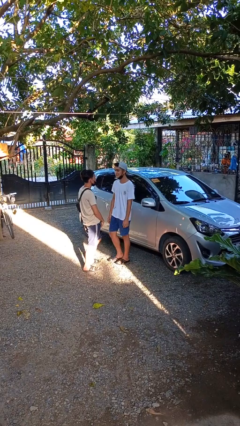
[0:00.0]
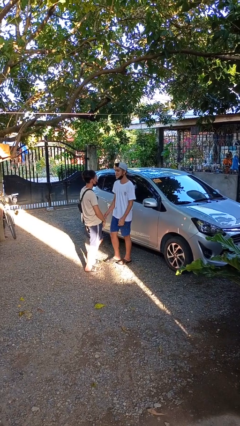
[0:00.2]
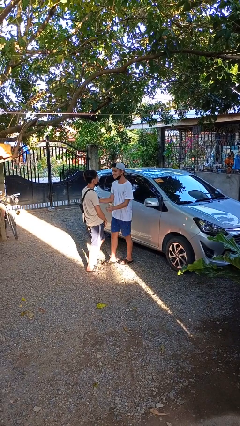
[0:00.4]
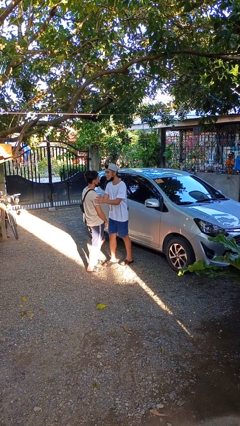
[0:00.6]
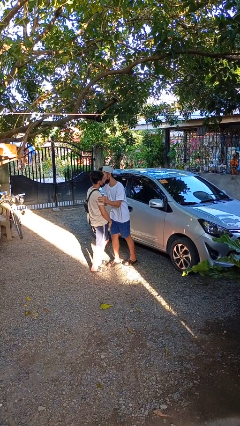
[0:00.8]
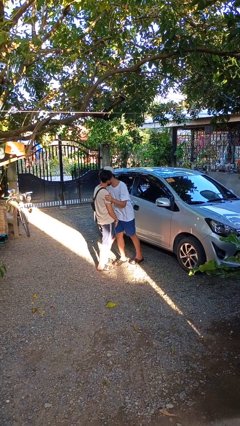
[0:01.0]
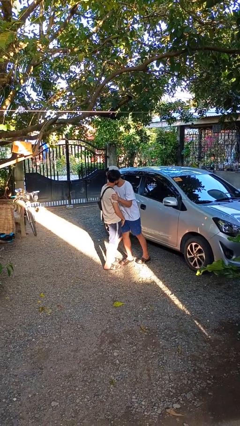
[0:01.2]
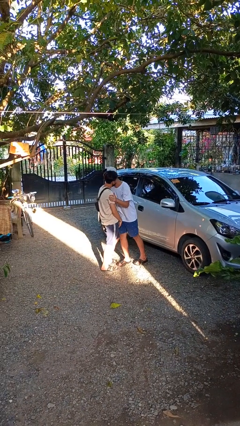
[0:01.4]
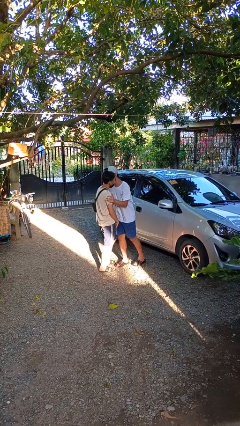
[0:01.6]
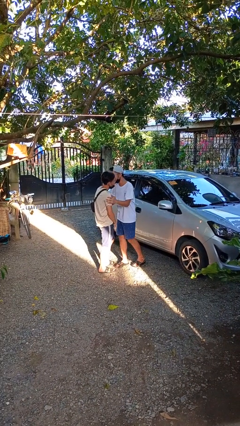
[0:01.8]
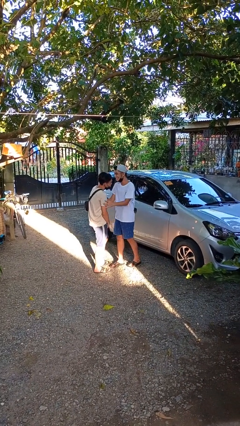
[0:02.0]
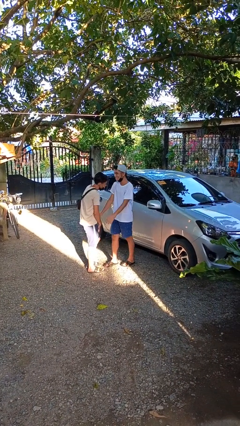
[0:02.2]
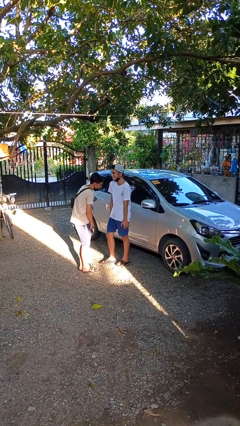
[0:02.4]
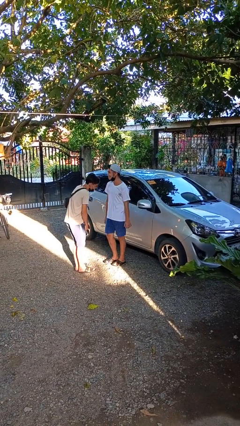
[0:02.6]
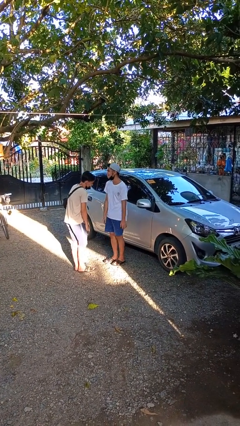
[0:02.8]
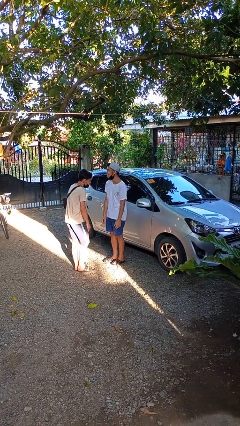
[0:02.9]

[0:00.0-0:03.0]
person kisses cheek of person

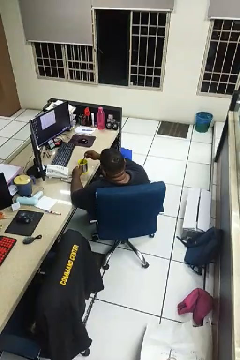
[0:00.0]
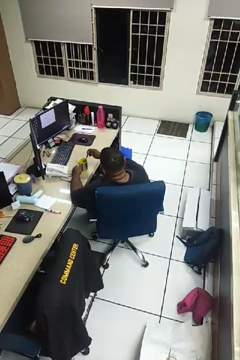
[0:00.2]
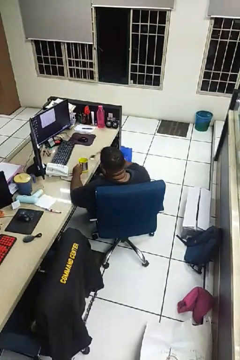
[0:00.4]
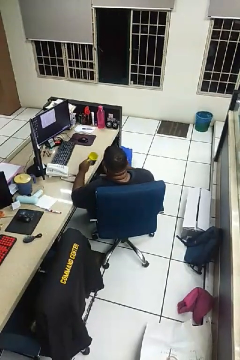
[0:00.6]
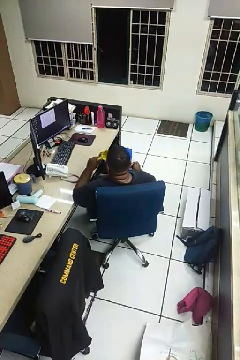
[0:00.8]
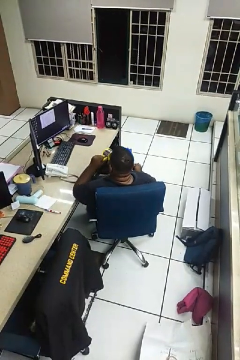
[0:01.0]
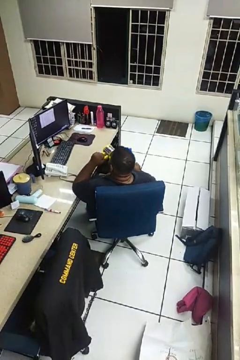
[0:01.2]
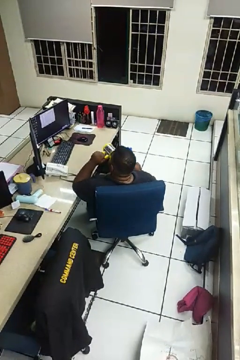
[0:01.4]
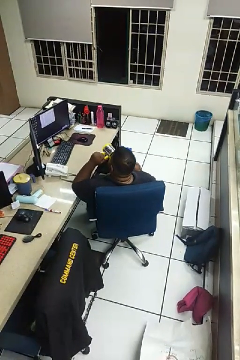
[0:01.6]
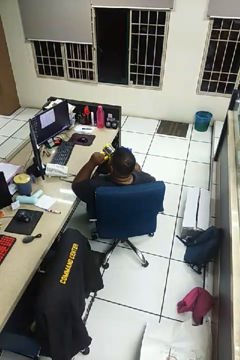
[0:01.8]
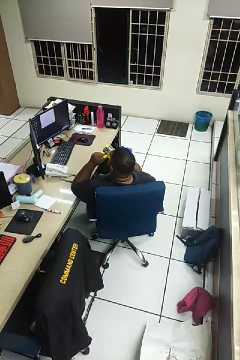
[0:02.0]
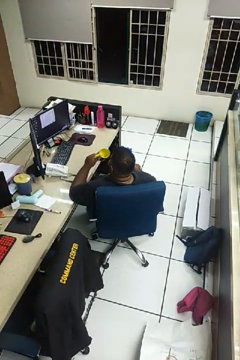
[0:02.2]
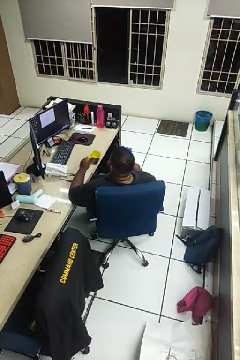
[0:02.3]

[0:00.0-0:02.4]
person drinks from mug

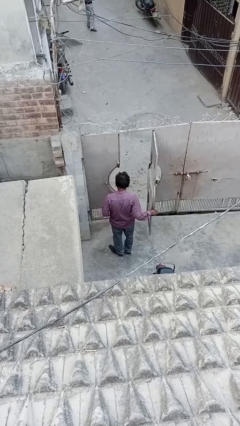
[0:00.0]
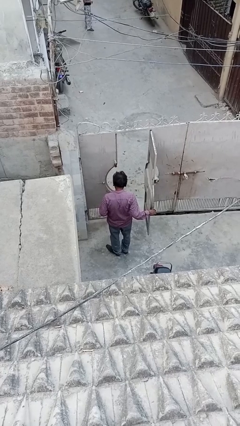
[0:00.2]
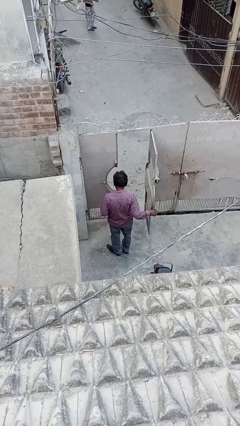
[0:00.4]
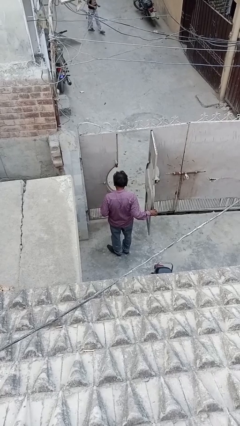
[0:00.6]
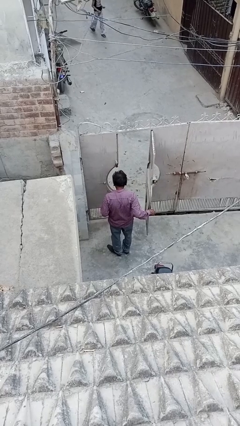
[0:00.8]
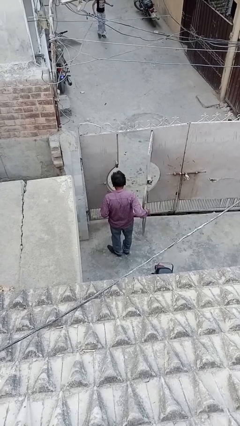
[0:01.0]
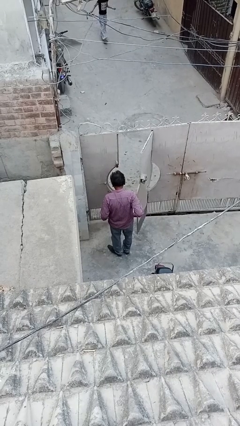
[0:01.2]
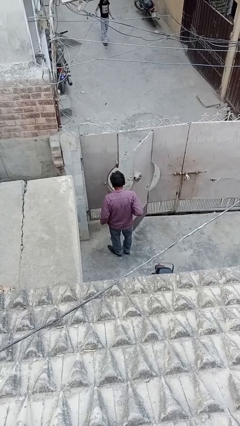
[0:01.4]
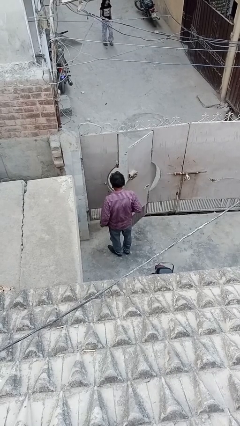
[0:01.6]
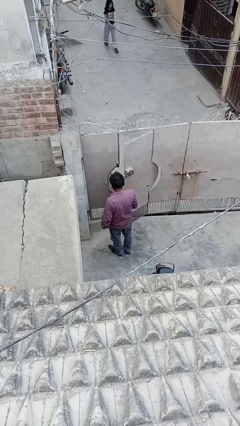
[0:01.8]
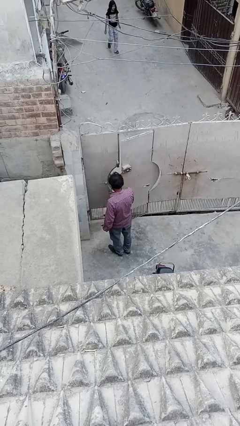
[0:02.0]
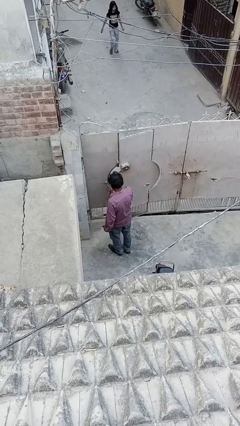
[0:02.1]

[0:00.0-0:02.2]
person closes facility door

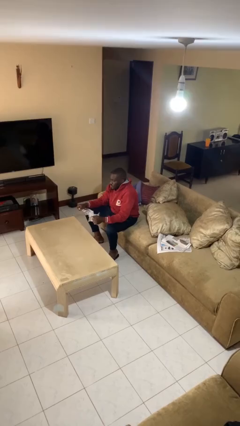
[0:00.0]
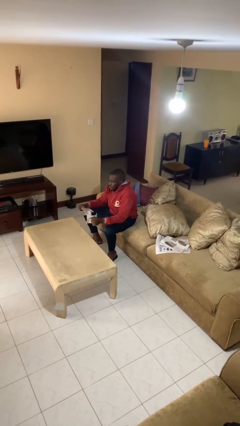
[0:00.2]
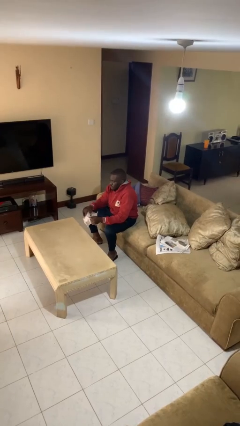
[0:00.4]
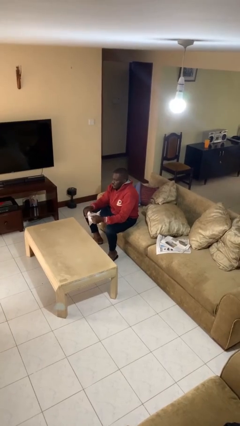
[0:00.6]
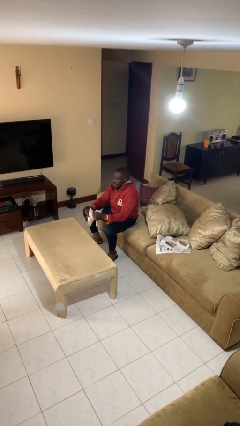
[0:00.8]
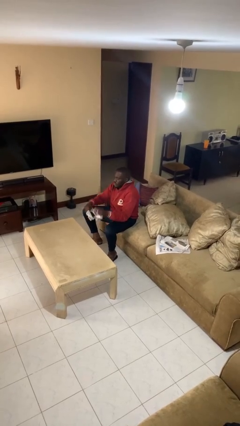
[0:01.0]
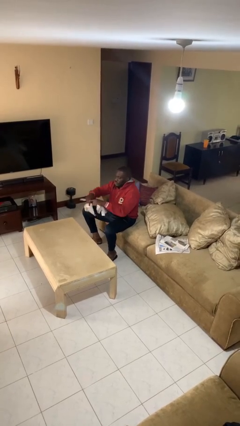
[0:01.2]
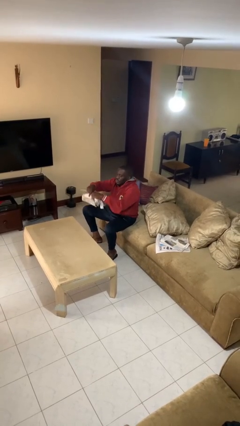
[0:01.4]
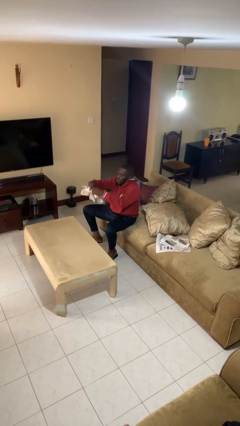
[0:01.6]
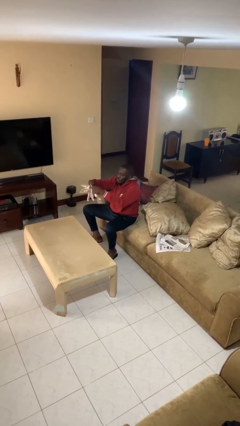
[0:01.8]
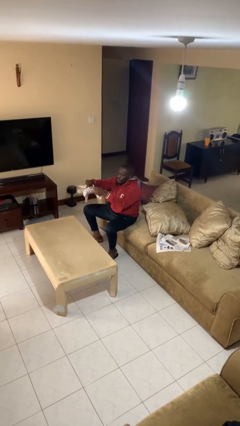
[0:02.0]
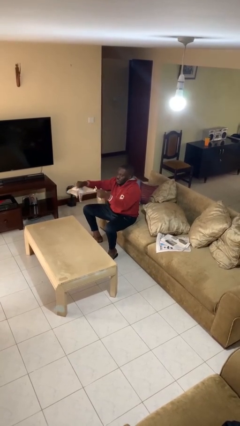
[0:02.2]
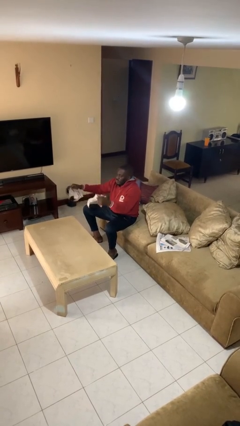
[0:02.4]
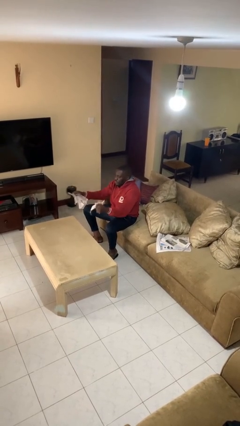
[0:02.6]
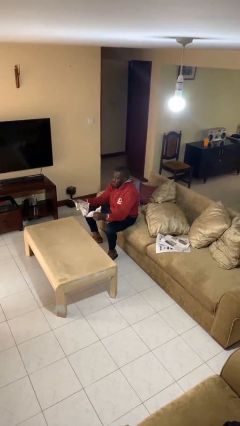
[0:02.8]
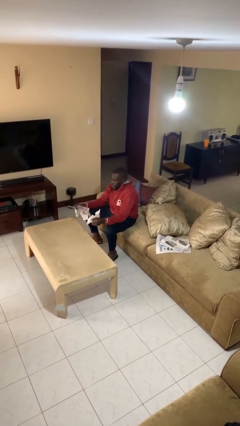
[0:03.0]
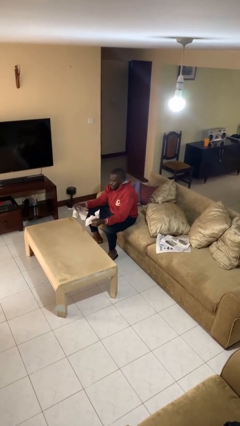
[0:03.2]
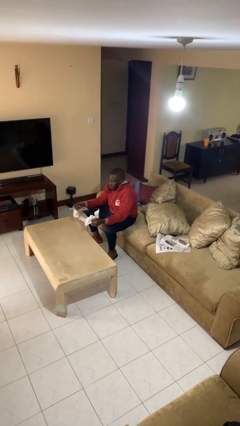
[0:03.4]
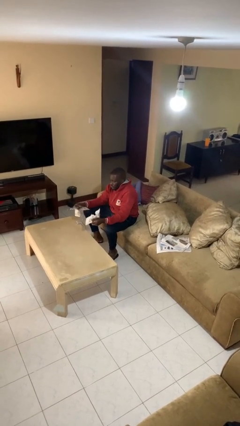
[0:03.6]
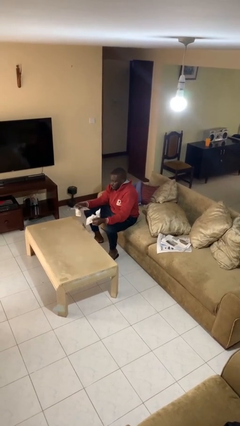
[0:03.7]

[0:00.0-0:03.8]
person tears paper

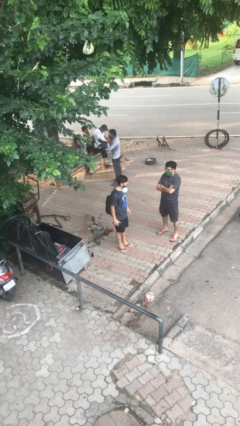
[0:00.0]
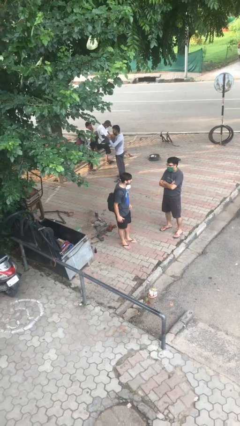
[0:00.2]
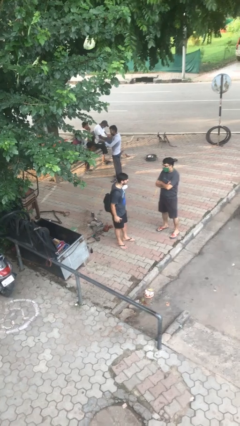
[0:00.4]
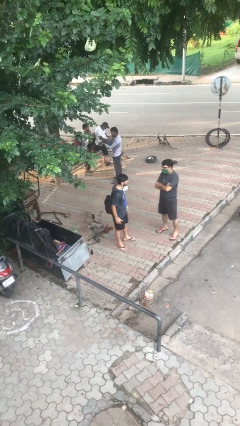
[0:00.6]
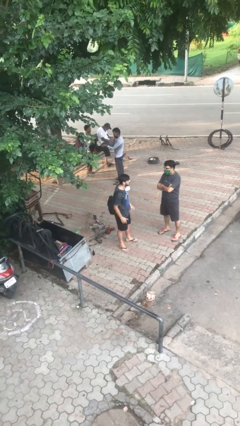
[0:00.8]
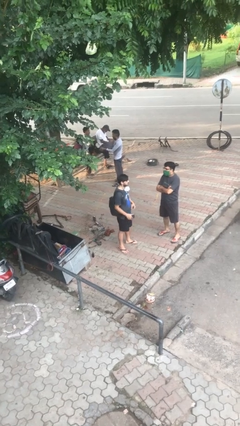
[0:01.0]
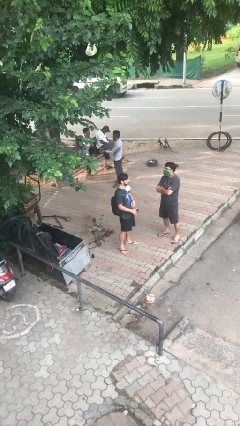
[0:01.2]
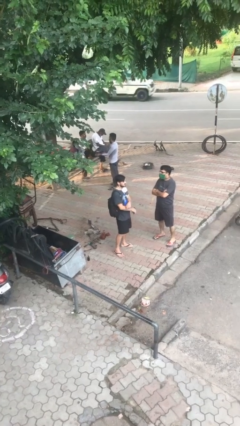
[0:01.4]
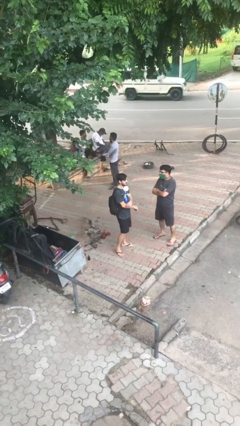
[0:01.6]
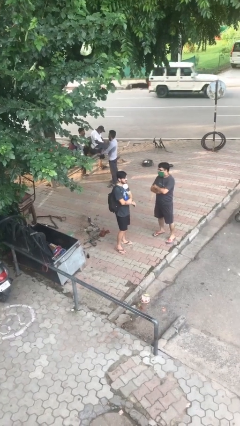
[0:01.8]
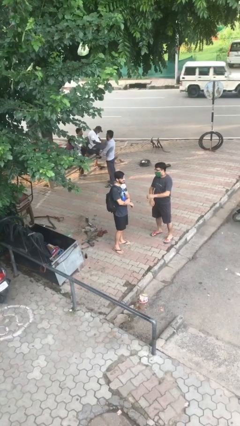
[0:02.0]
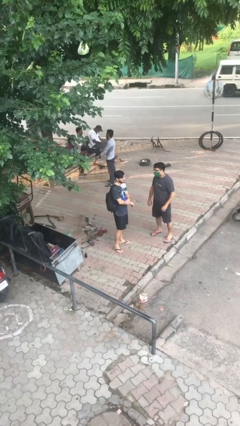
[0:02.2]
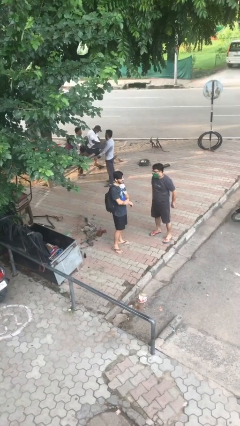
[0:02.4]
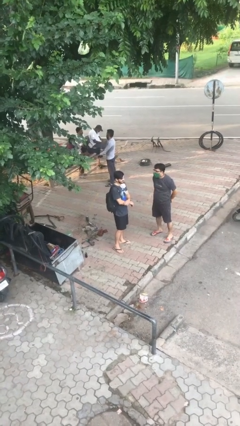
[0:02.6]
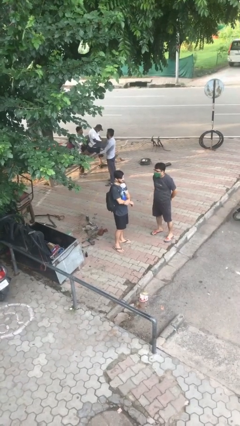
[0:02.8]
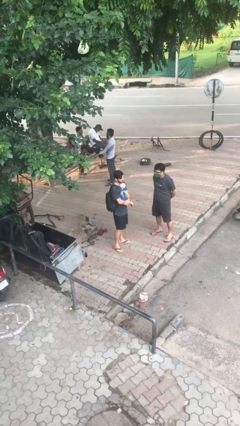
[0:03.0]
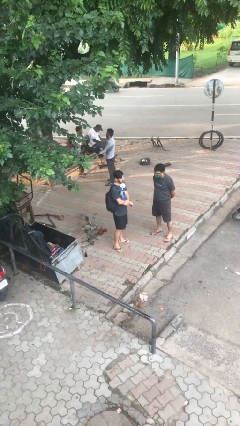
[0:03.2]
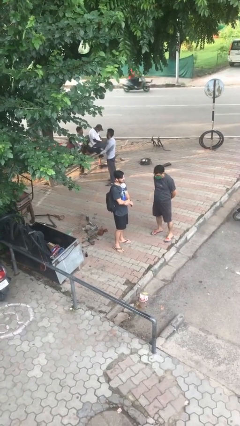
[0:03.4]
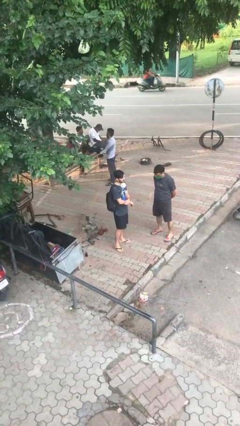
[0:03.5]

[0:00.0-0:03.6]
person talks to person

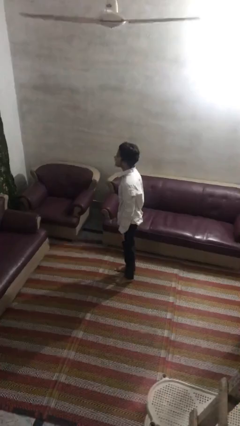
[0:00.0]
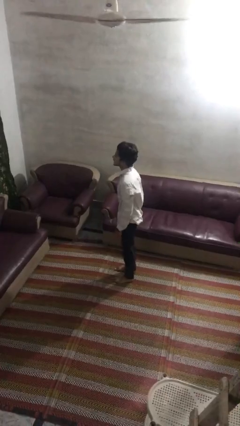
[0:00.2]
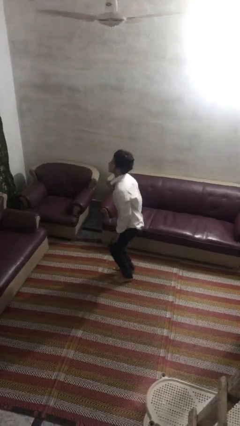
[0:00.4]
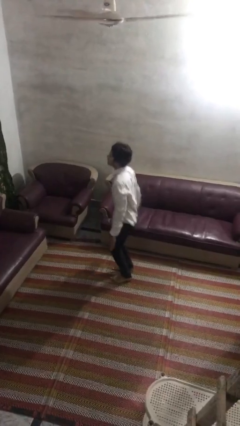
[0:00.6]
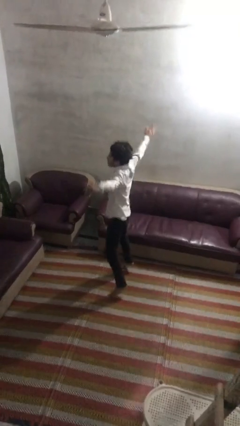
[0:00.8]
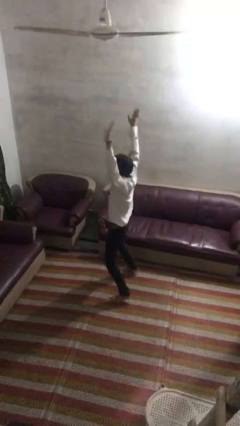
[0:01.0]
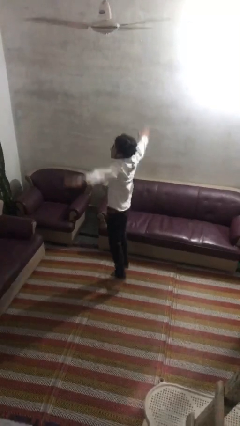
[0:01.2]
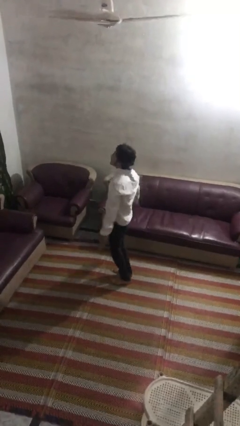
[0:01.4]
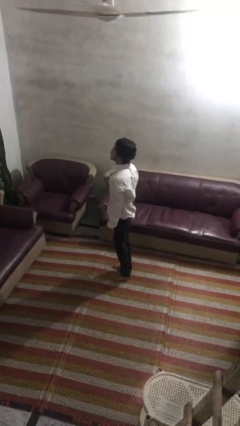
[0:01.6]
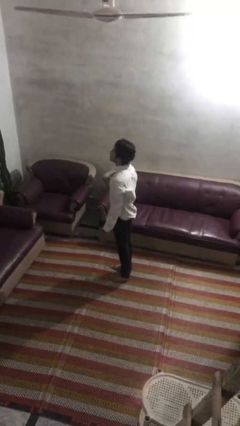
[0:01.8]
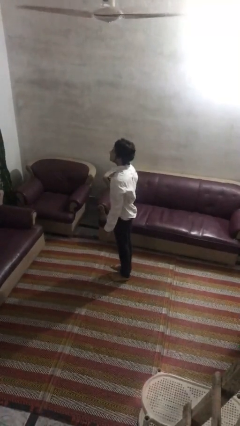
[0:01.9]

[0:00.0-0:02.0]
person exercises with jumping jacks

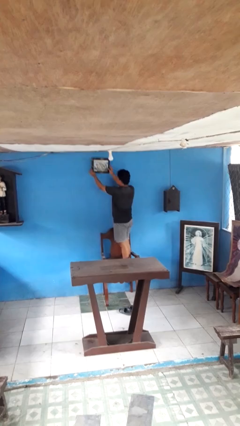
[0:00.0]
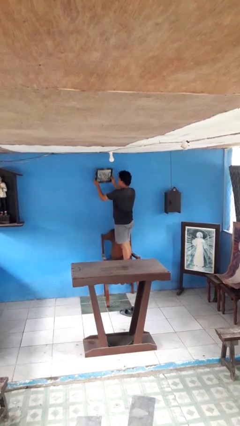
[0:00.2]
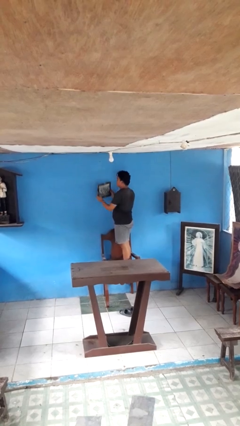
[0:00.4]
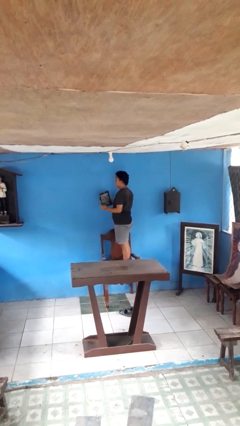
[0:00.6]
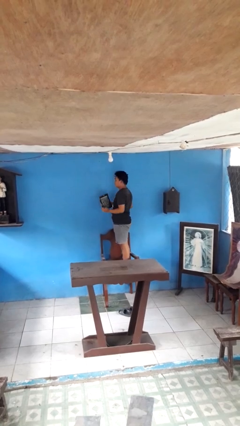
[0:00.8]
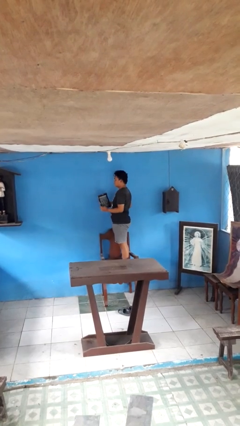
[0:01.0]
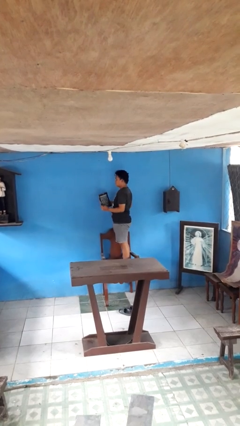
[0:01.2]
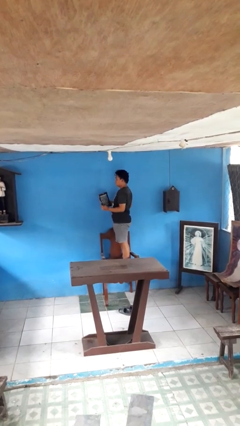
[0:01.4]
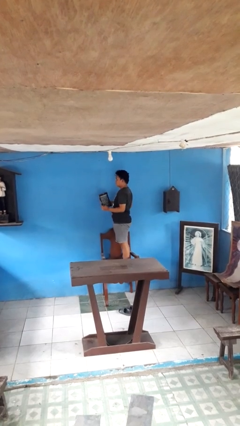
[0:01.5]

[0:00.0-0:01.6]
person takes down picture frame
